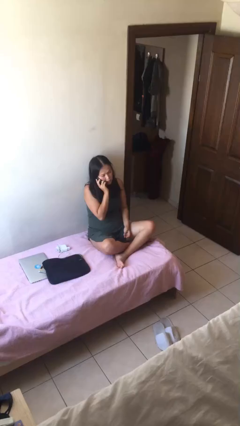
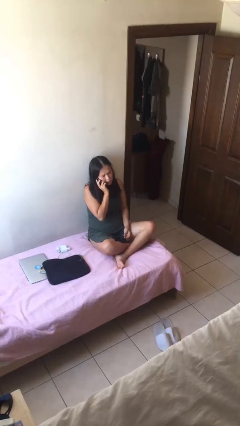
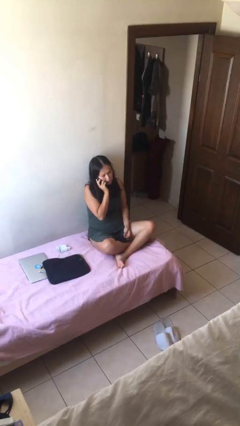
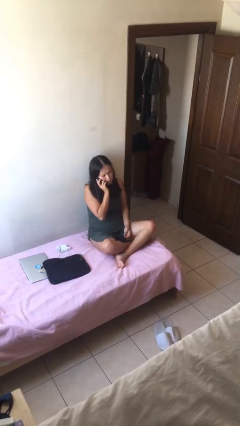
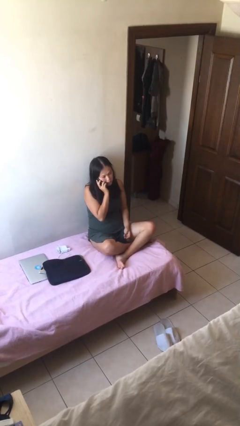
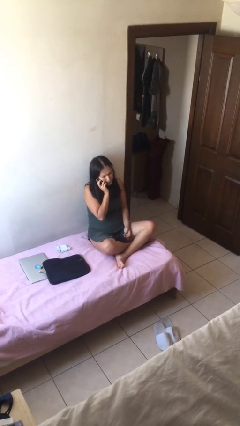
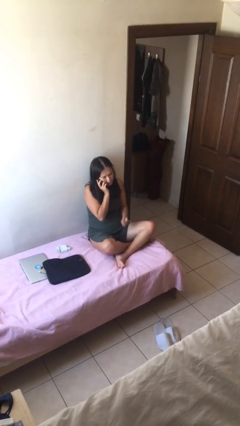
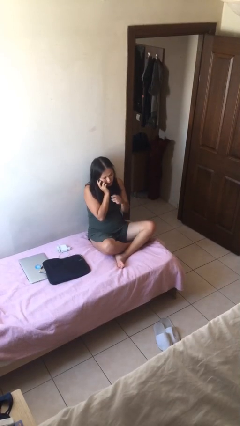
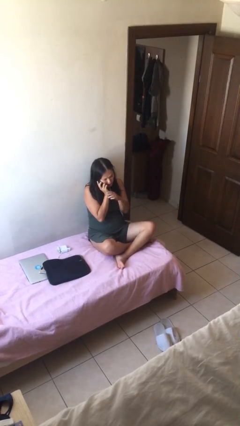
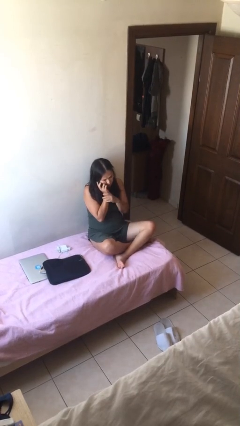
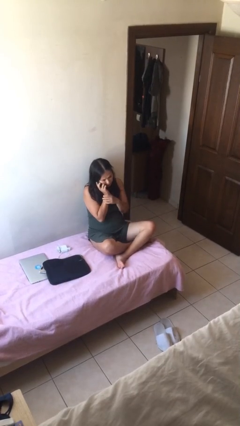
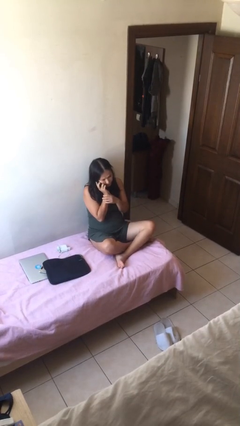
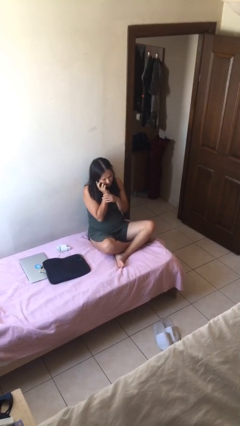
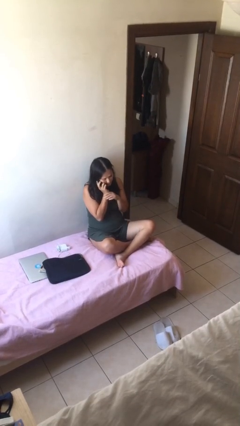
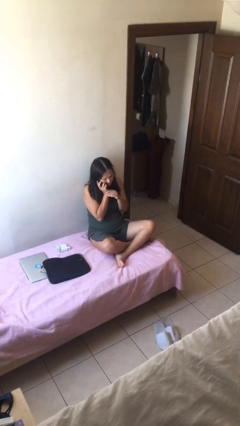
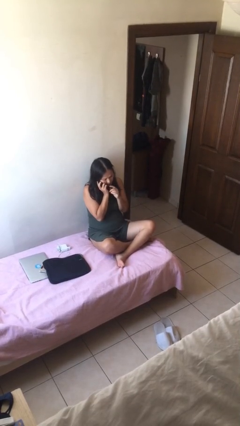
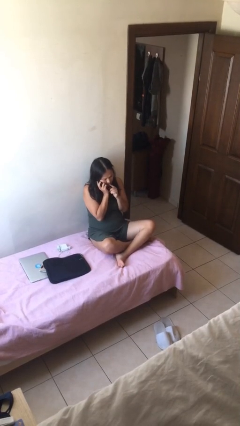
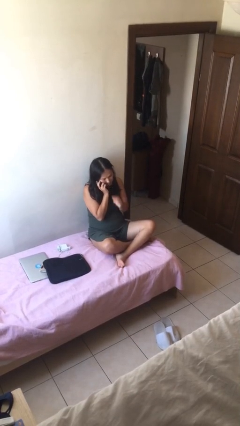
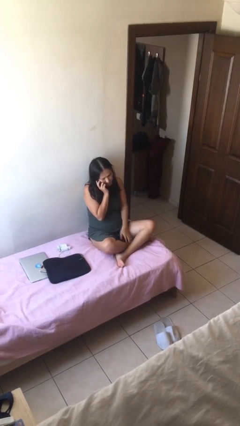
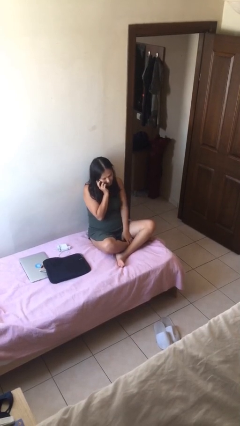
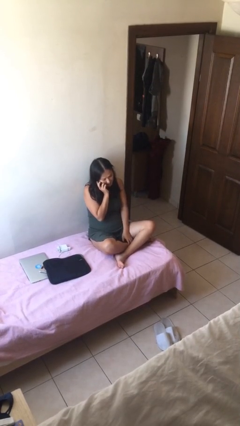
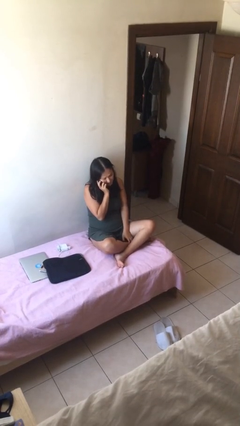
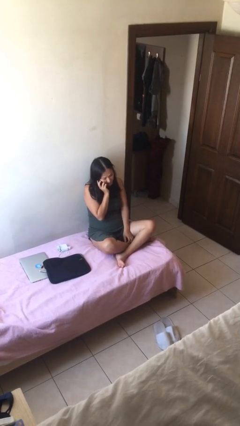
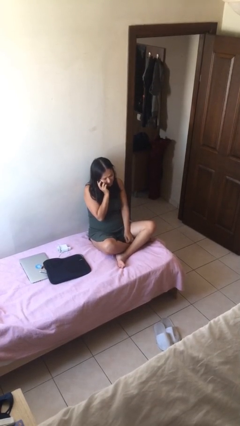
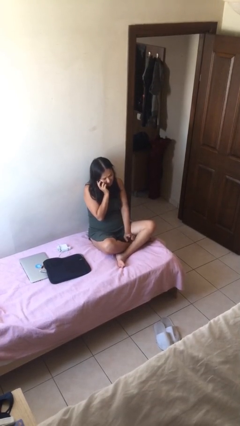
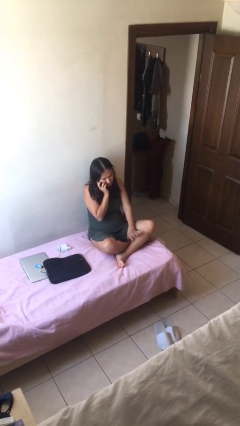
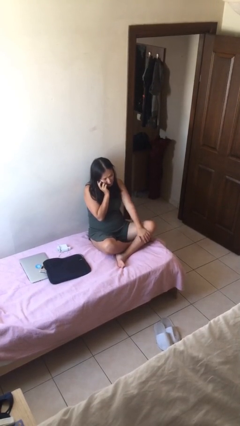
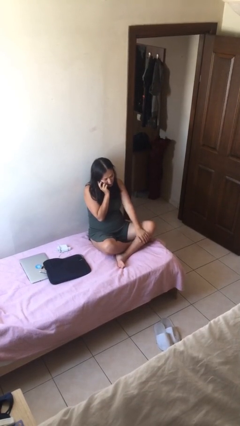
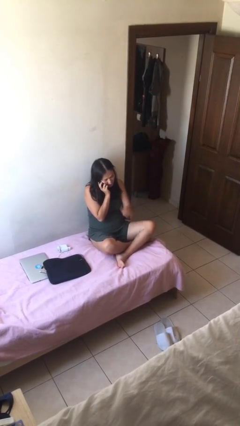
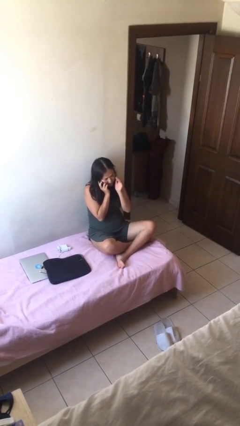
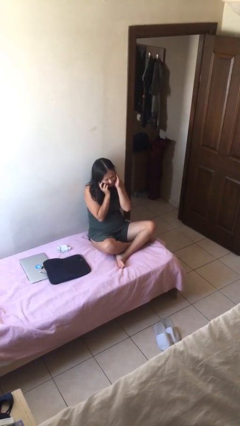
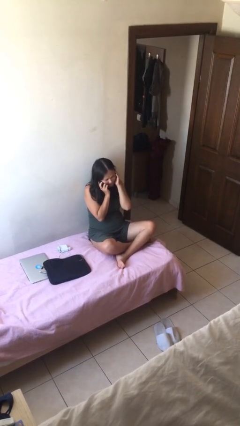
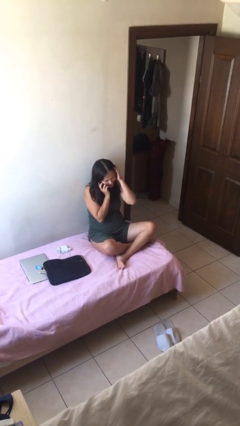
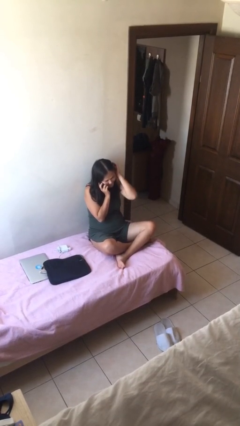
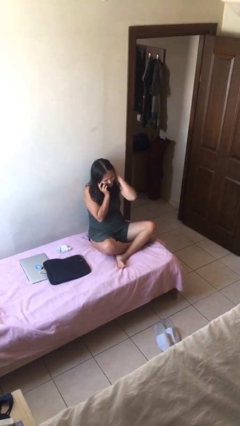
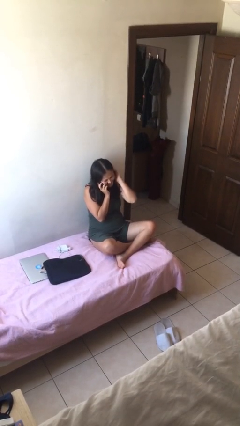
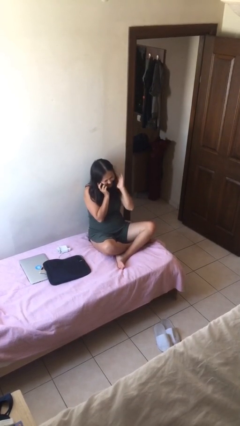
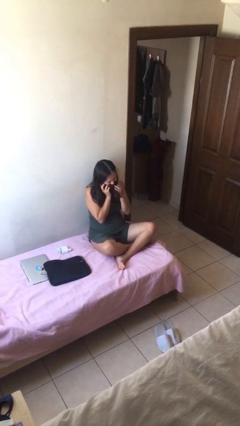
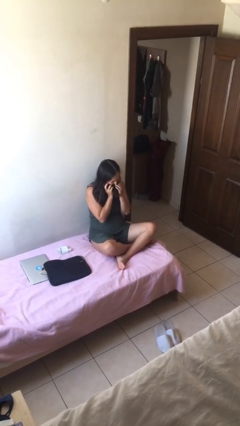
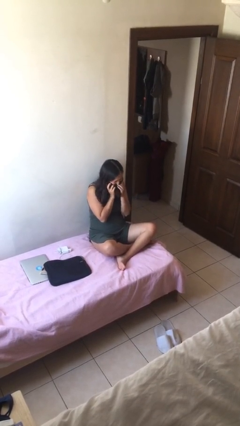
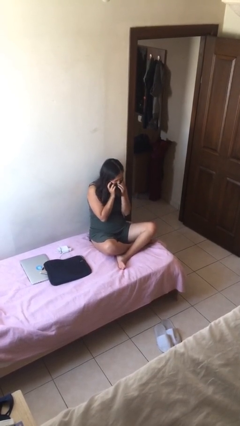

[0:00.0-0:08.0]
person talks on phone

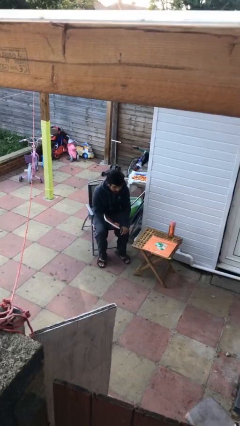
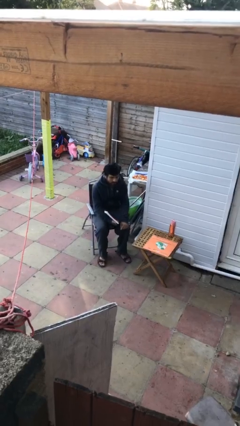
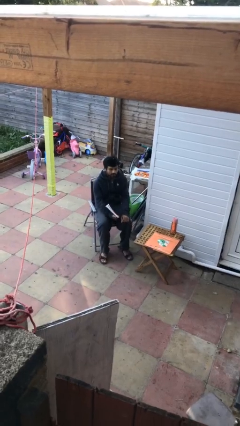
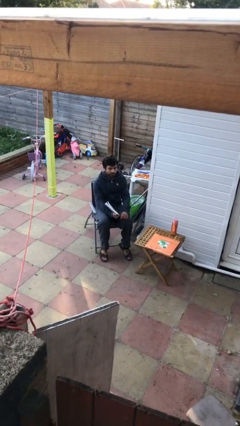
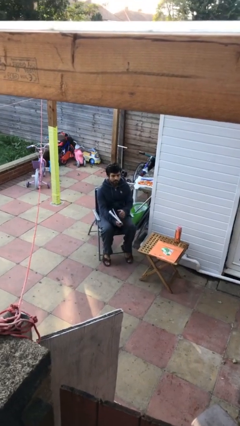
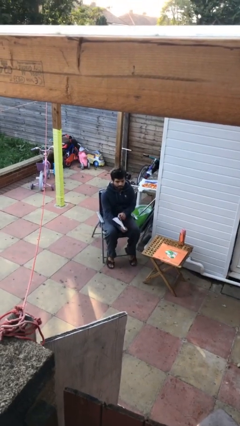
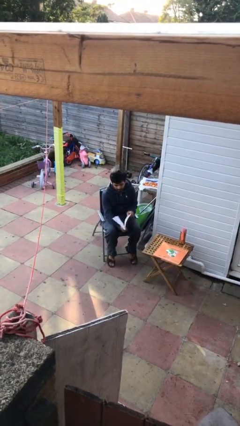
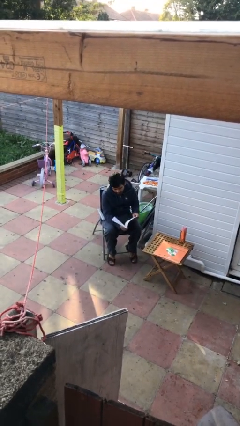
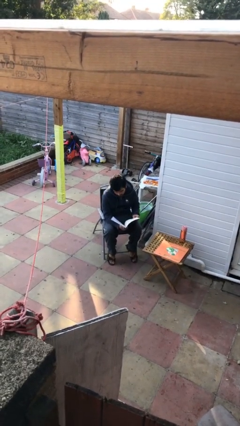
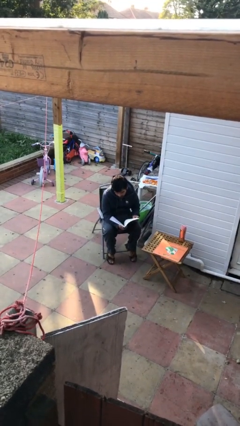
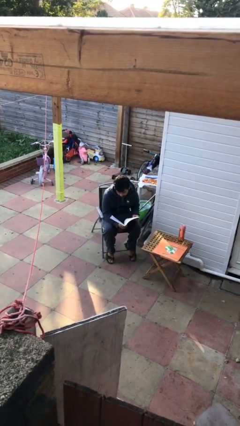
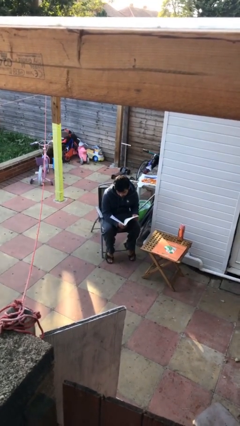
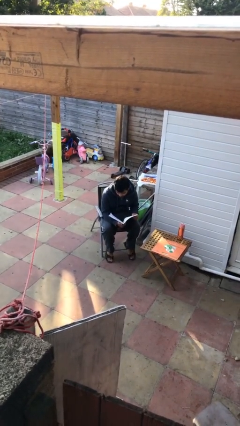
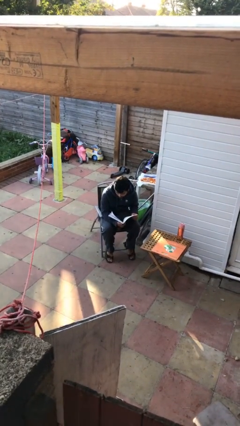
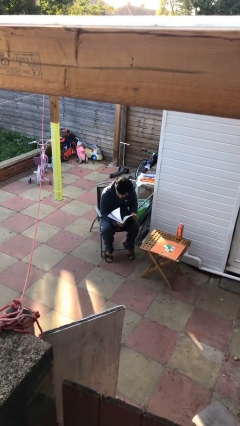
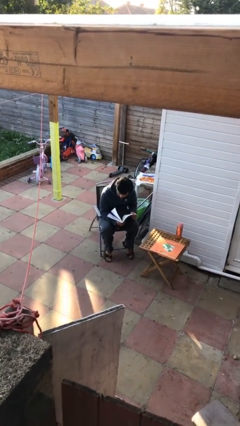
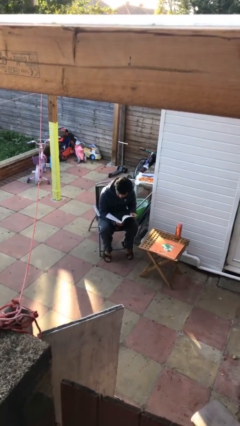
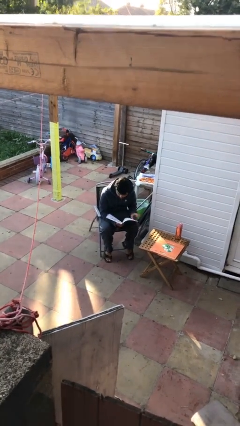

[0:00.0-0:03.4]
person reads document

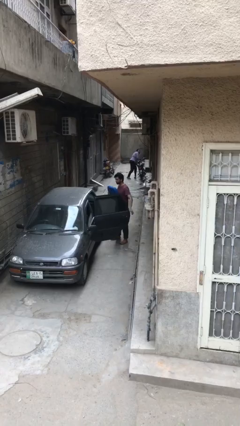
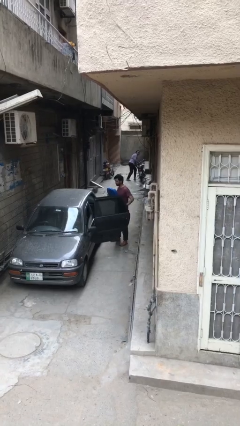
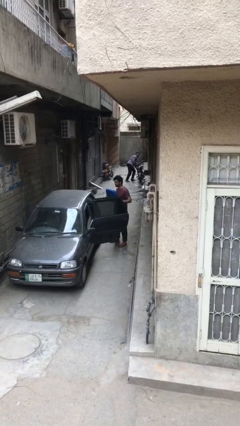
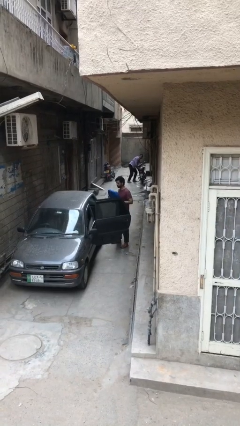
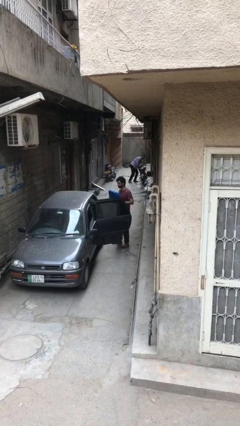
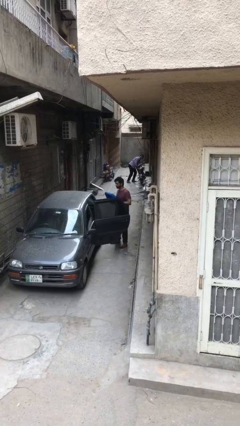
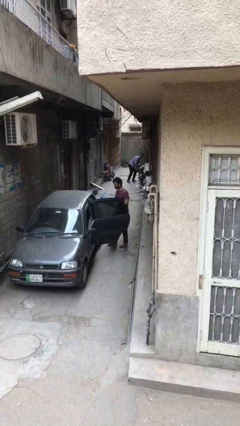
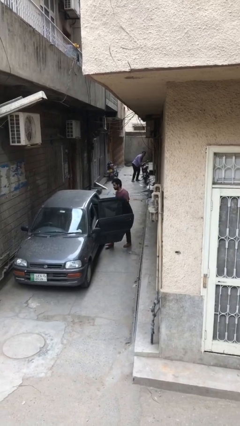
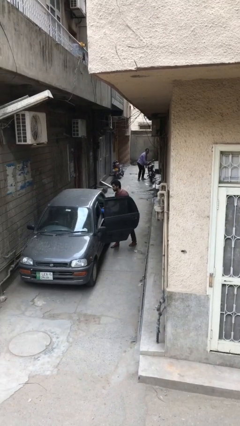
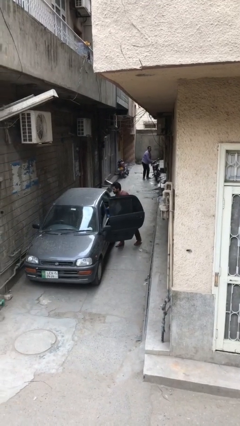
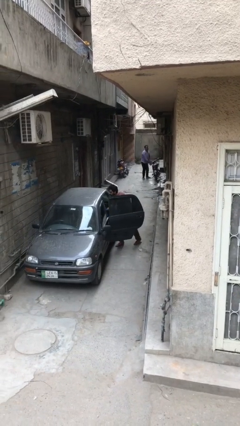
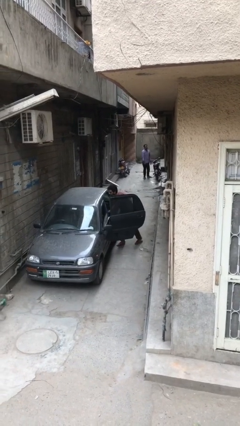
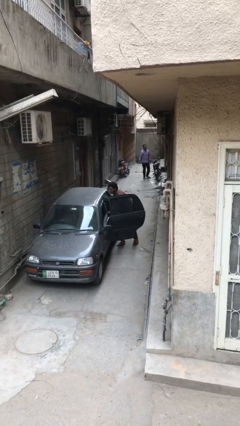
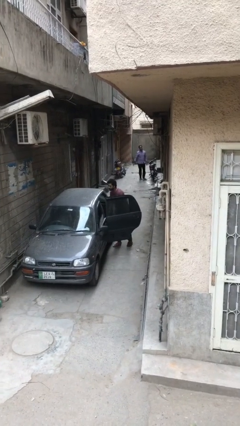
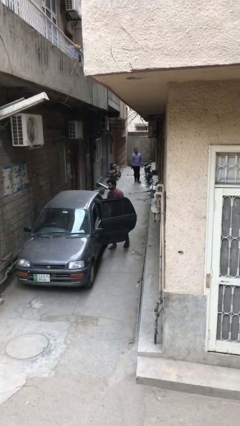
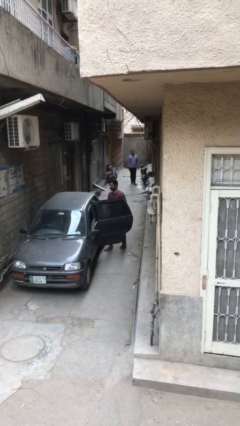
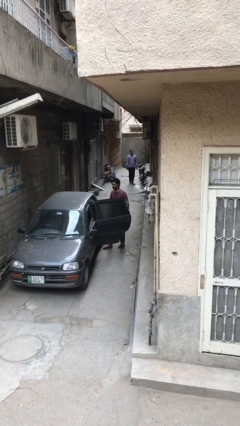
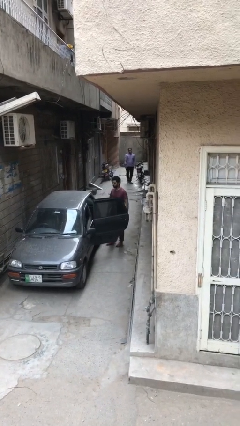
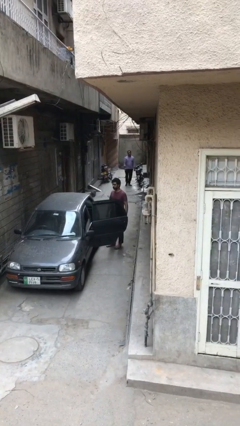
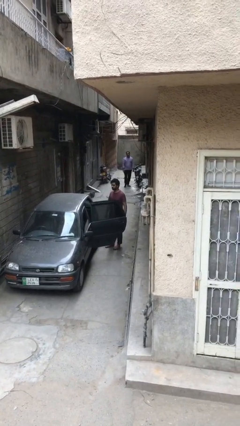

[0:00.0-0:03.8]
person loads car

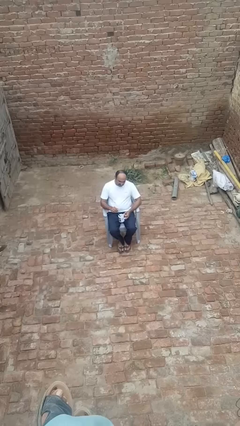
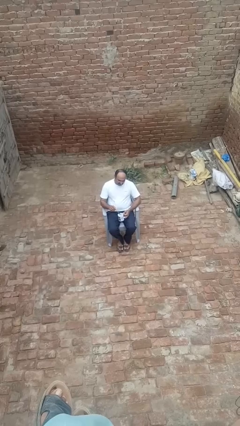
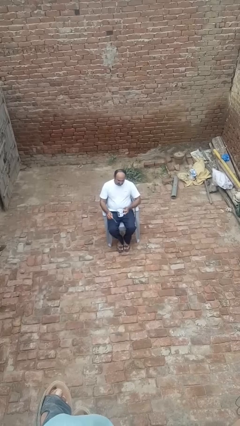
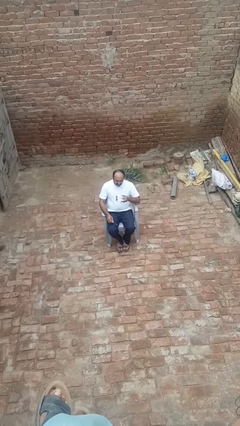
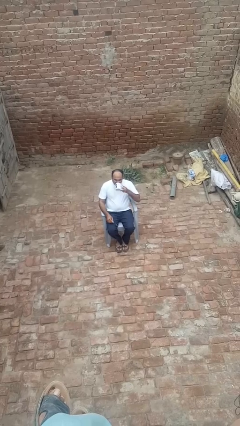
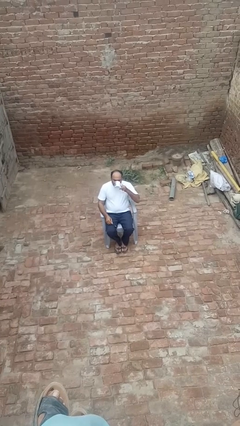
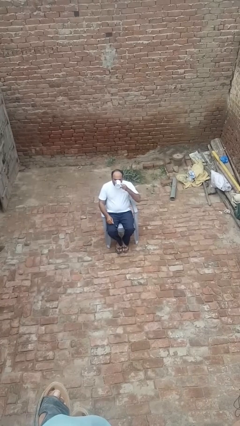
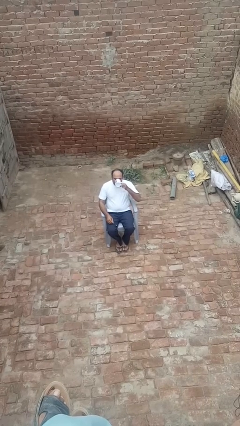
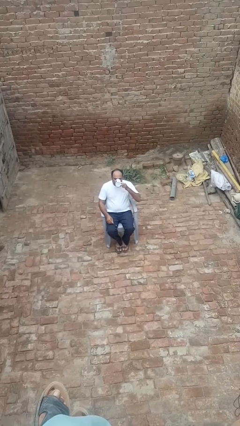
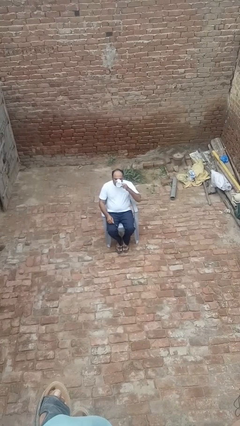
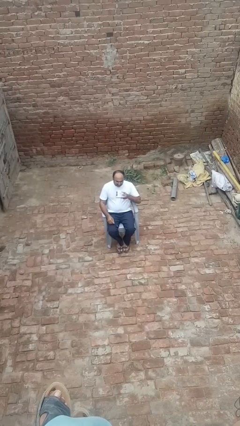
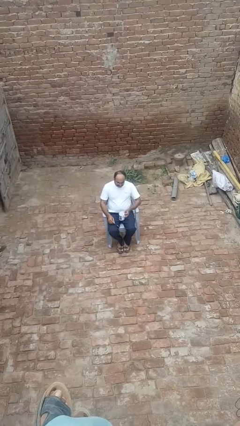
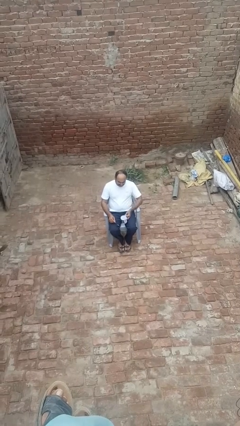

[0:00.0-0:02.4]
person drinks from mug

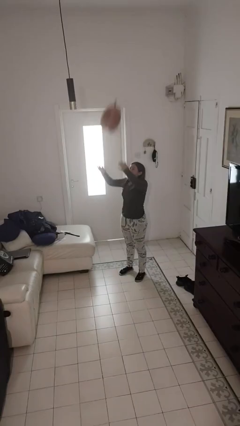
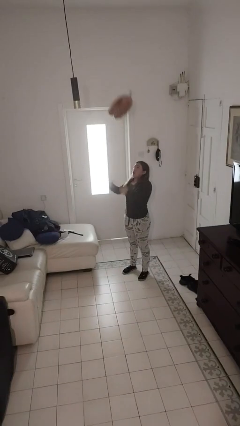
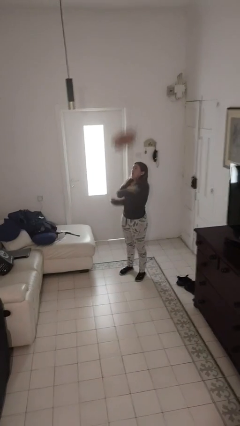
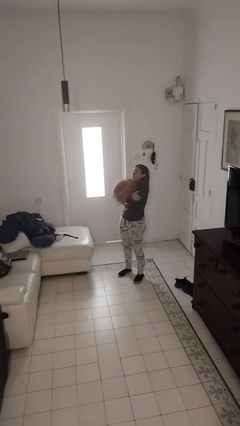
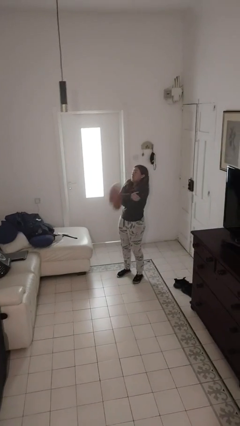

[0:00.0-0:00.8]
person catches dropped object
